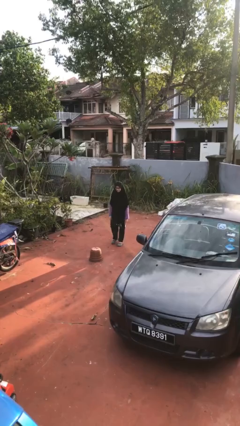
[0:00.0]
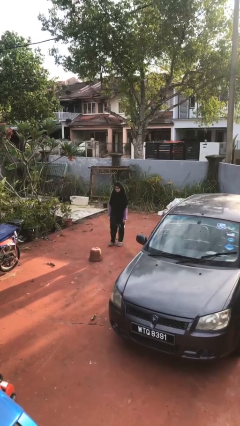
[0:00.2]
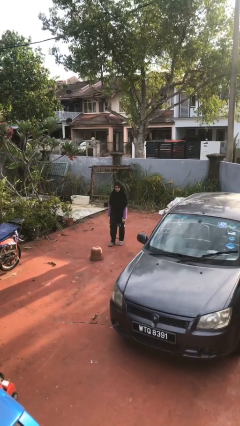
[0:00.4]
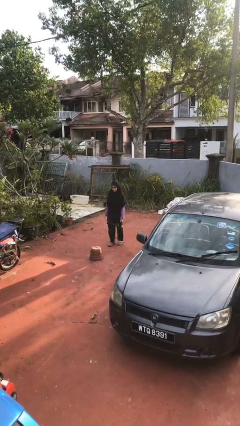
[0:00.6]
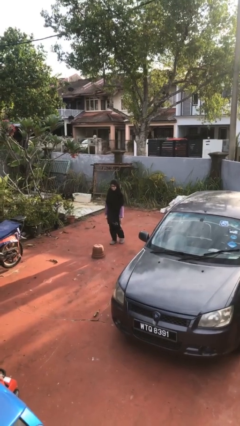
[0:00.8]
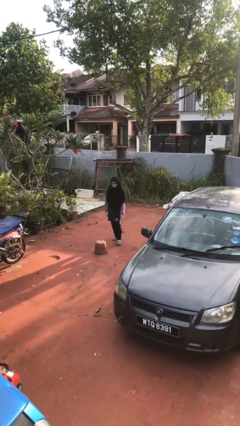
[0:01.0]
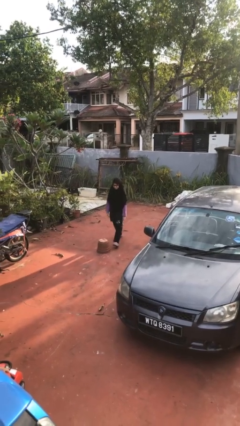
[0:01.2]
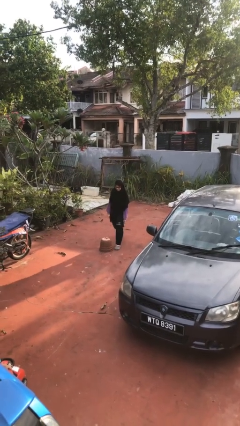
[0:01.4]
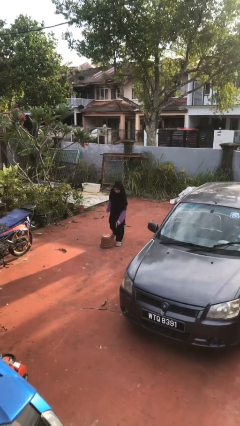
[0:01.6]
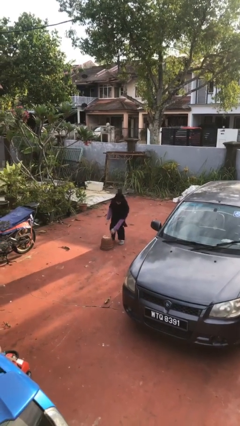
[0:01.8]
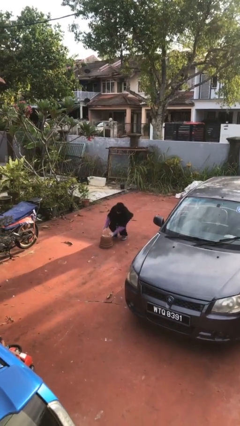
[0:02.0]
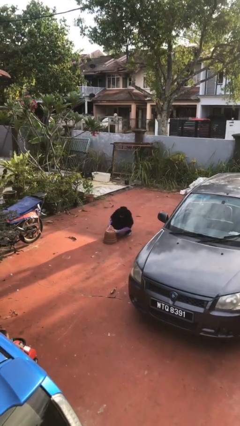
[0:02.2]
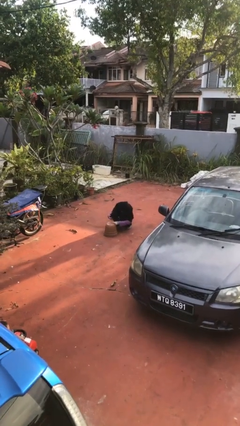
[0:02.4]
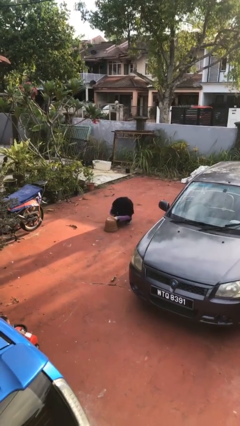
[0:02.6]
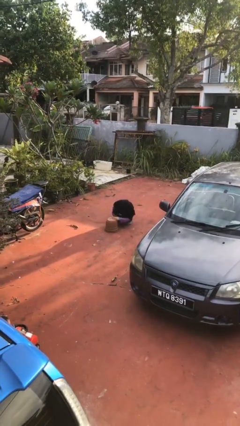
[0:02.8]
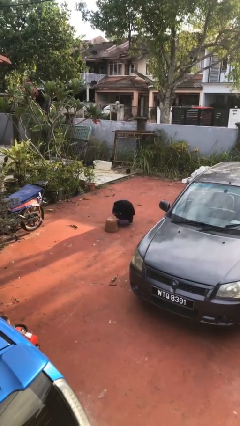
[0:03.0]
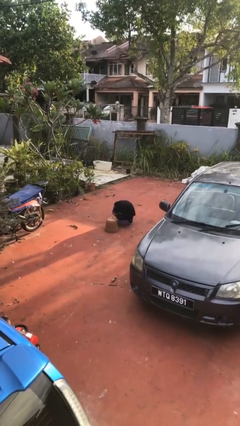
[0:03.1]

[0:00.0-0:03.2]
person trips on object on floor

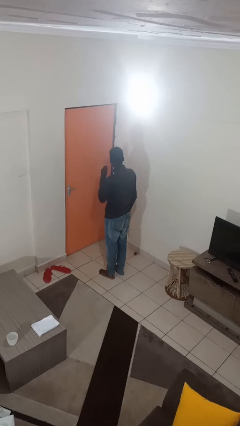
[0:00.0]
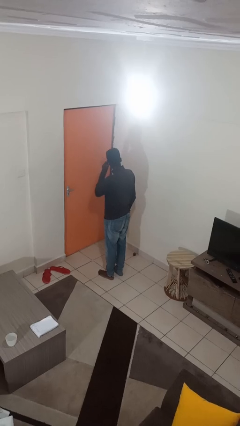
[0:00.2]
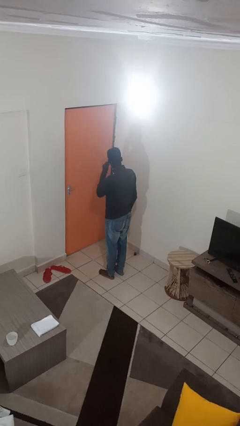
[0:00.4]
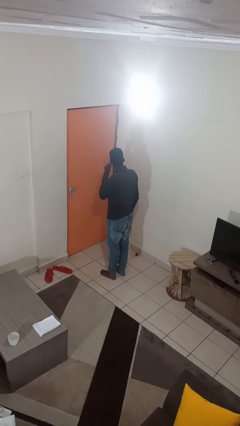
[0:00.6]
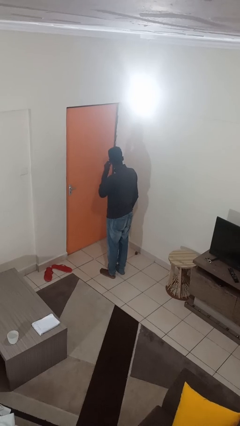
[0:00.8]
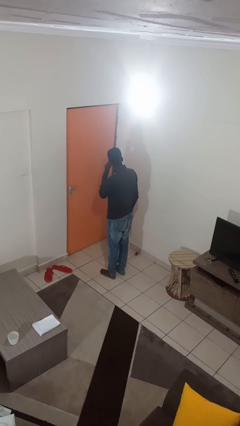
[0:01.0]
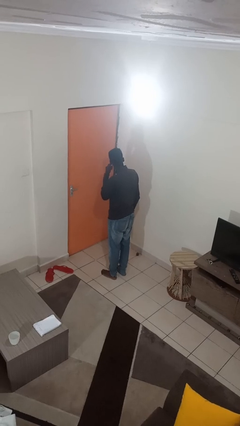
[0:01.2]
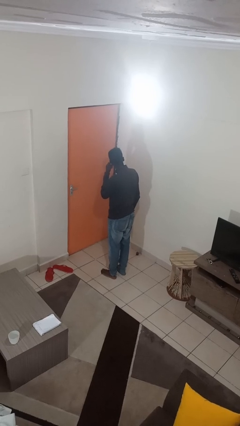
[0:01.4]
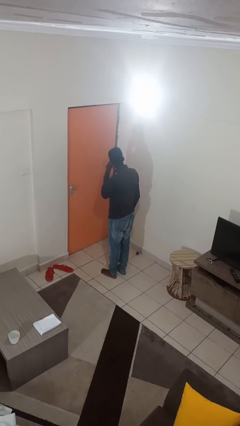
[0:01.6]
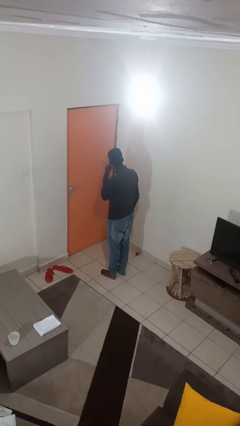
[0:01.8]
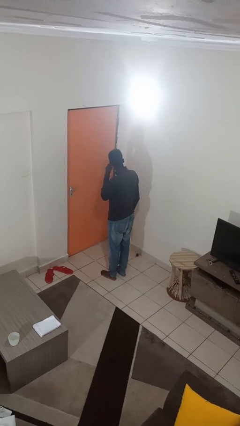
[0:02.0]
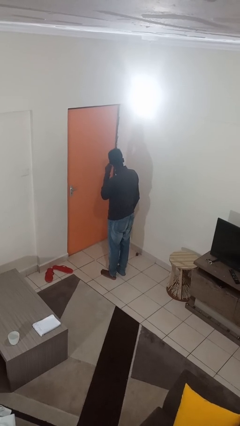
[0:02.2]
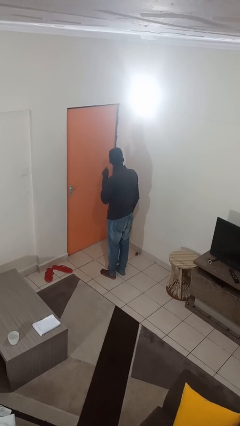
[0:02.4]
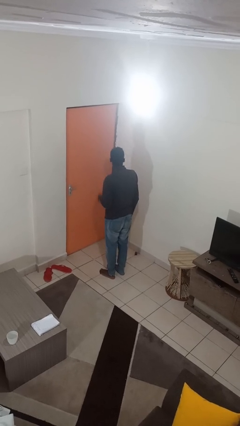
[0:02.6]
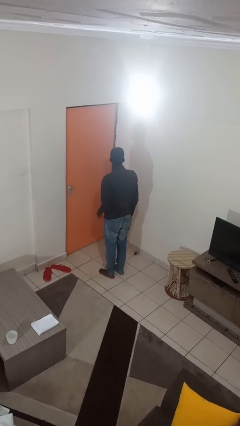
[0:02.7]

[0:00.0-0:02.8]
person touches earlobe

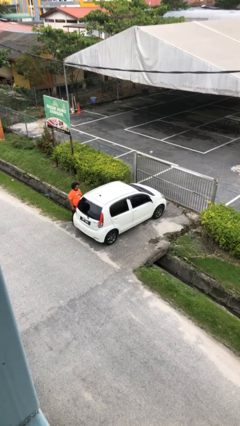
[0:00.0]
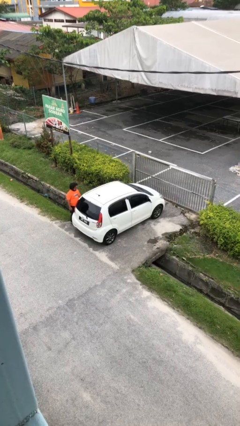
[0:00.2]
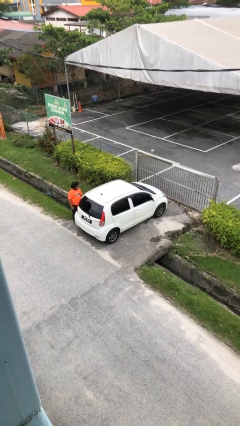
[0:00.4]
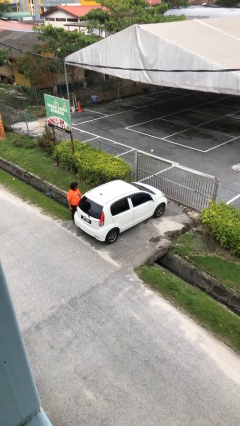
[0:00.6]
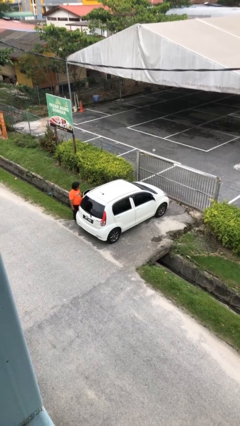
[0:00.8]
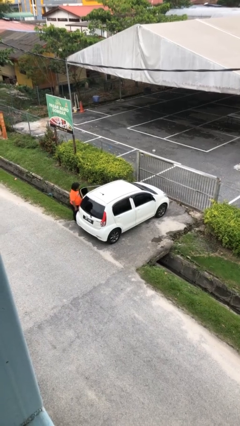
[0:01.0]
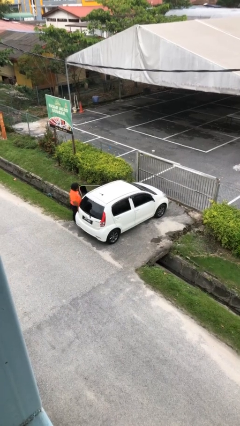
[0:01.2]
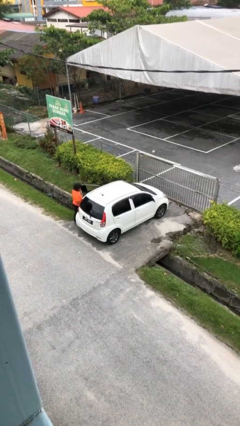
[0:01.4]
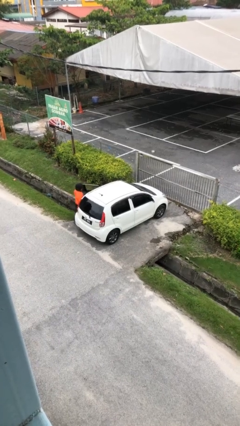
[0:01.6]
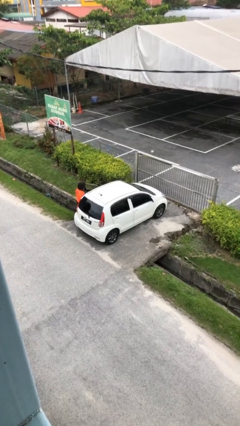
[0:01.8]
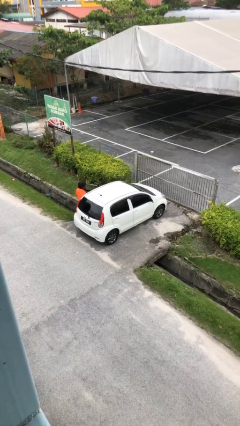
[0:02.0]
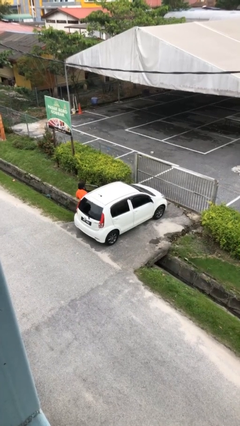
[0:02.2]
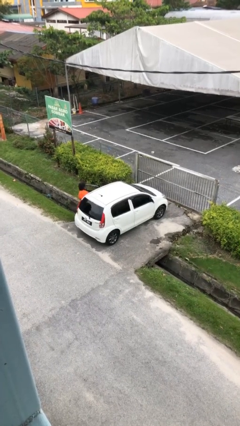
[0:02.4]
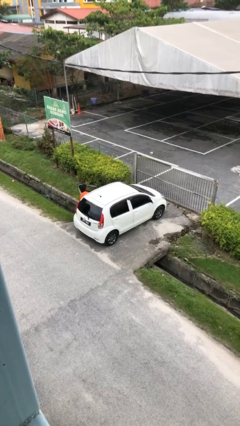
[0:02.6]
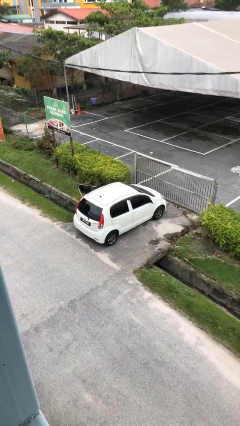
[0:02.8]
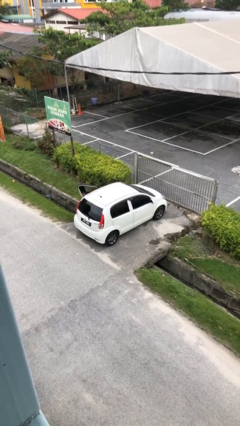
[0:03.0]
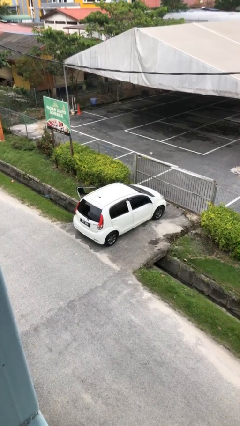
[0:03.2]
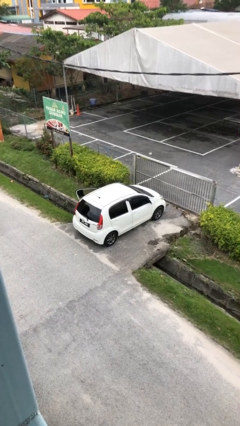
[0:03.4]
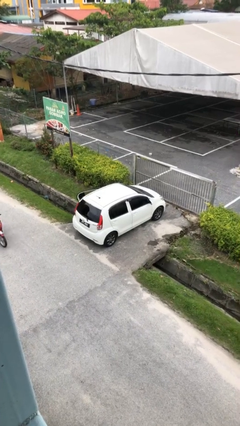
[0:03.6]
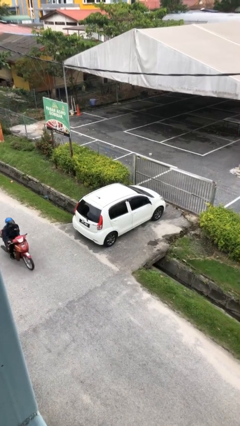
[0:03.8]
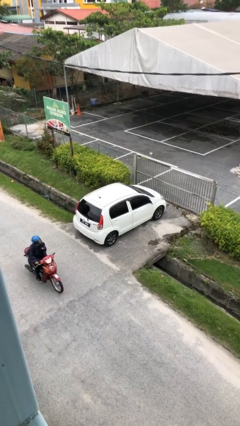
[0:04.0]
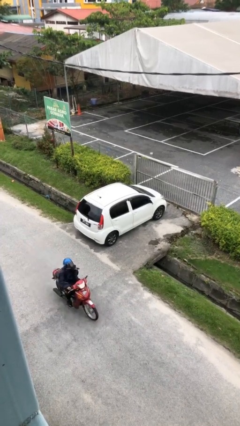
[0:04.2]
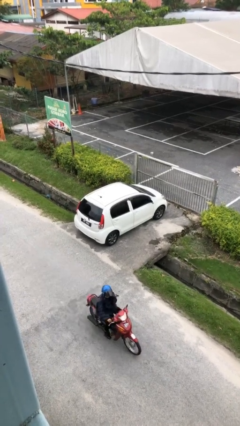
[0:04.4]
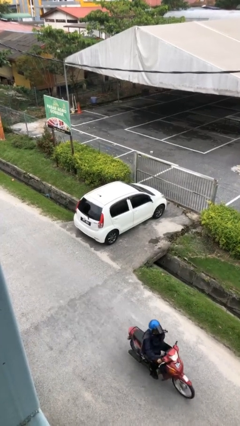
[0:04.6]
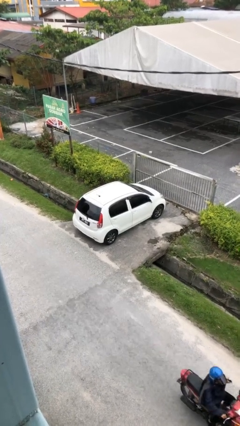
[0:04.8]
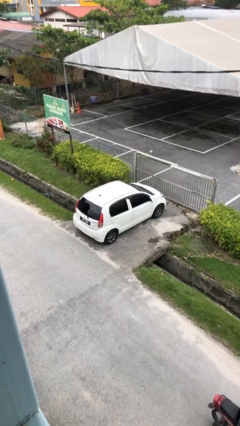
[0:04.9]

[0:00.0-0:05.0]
car picks up person

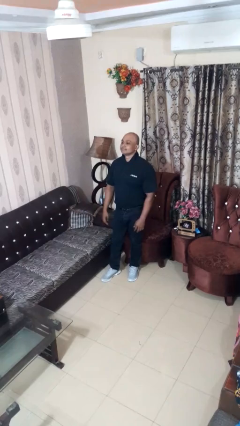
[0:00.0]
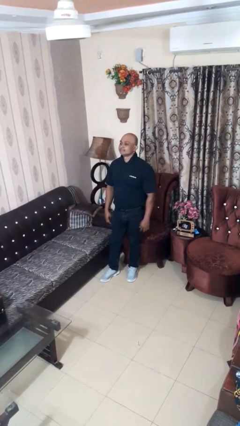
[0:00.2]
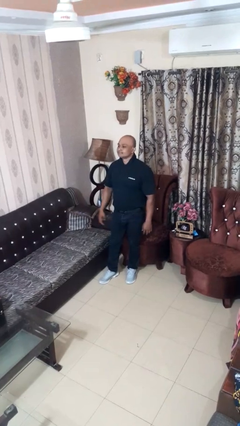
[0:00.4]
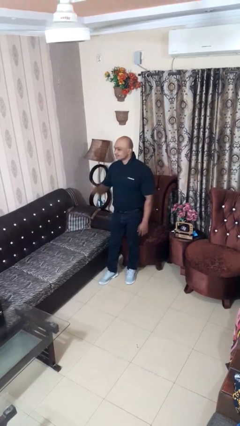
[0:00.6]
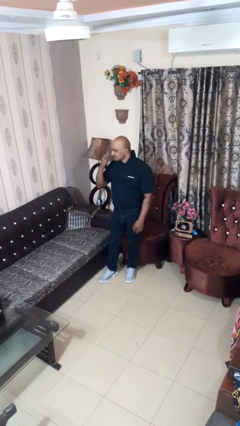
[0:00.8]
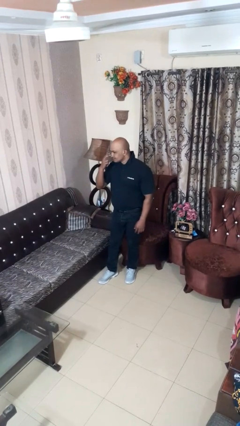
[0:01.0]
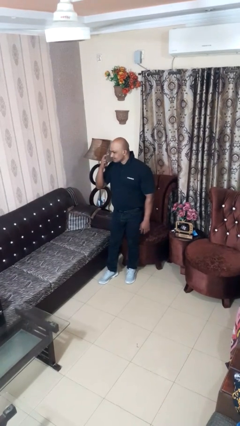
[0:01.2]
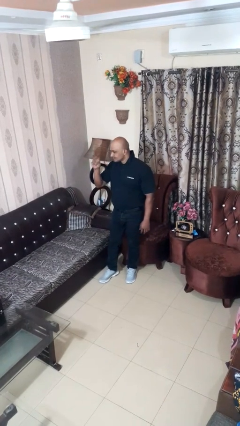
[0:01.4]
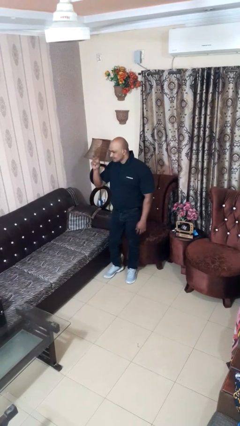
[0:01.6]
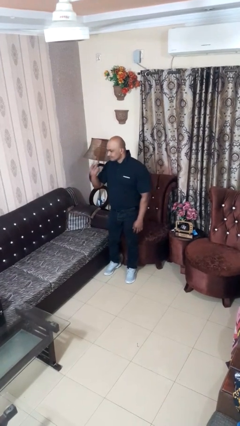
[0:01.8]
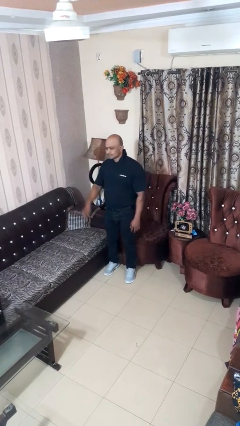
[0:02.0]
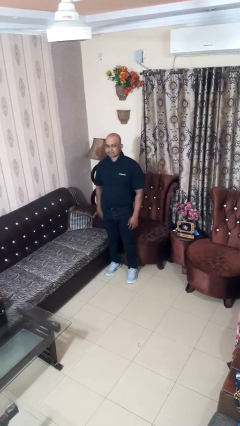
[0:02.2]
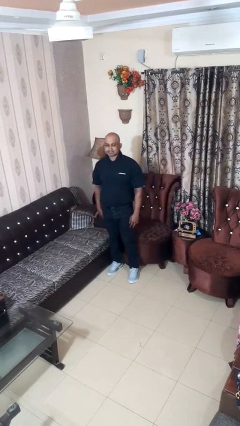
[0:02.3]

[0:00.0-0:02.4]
person gestures watch closely

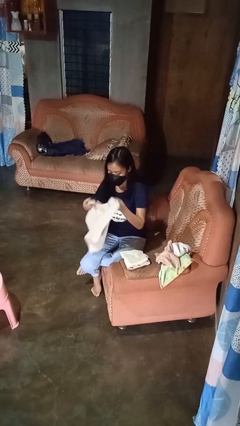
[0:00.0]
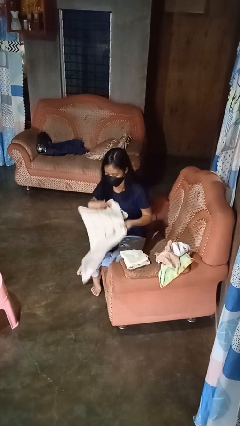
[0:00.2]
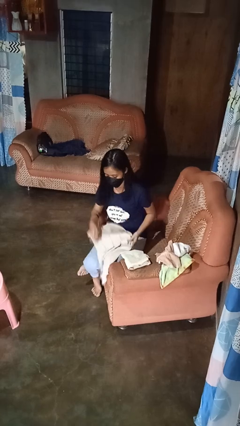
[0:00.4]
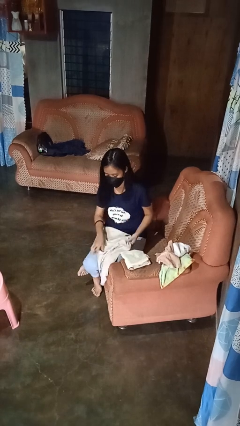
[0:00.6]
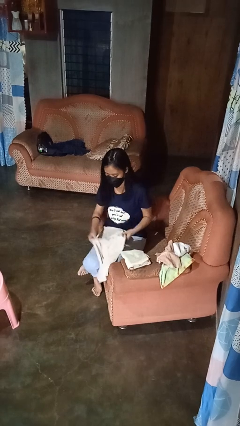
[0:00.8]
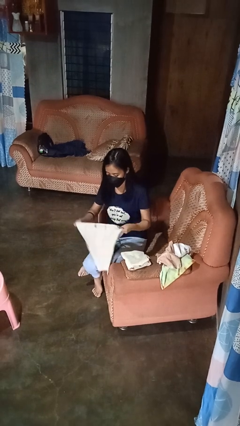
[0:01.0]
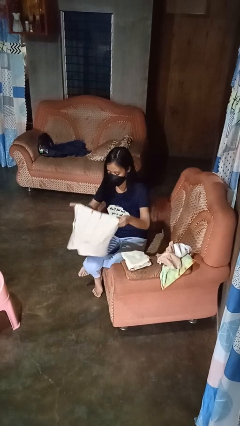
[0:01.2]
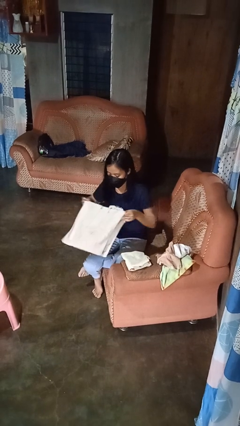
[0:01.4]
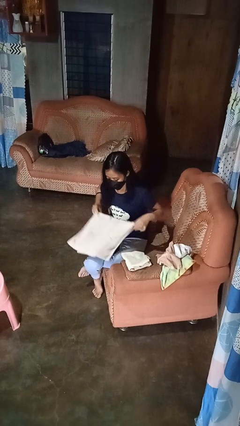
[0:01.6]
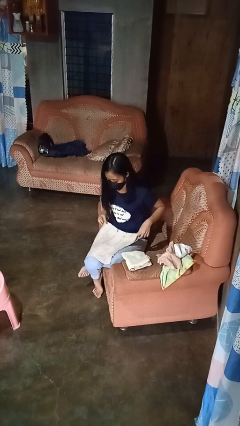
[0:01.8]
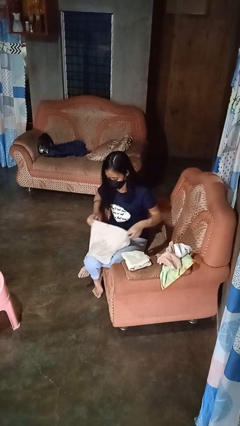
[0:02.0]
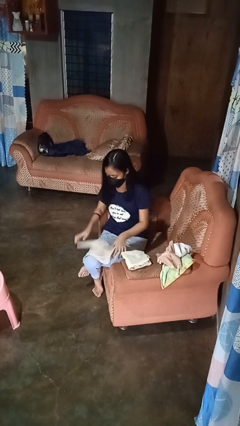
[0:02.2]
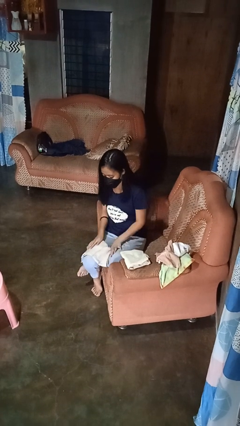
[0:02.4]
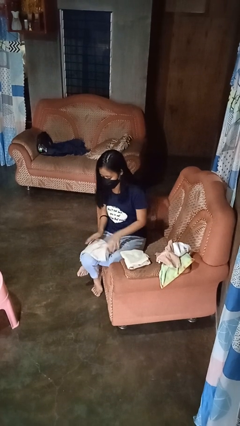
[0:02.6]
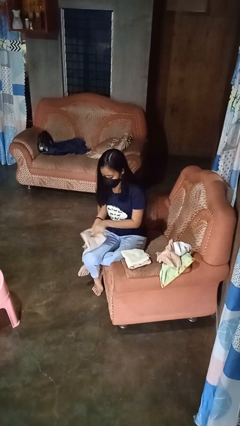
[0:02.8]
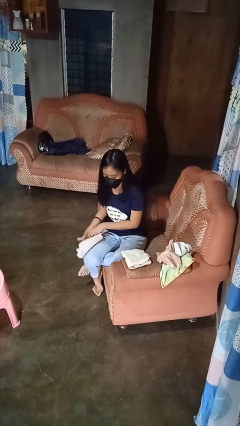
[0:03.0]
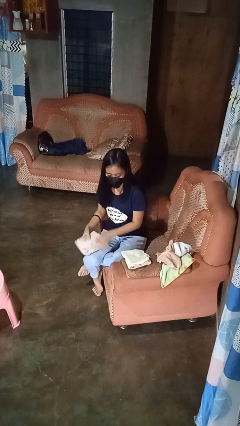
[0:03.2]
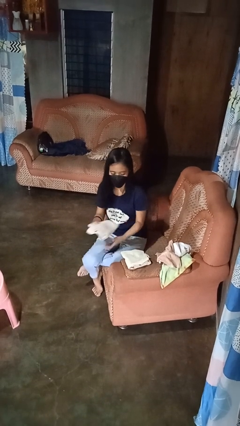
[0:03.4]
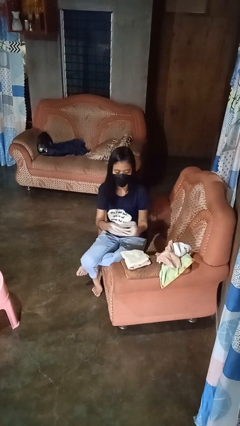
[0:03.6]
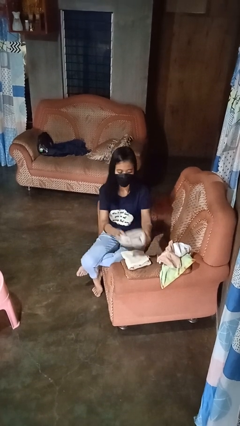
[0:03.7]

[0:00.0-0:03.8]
person folds towel

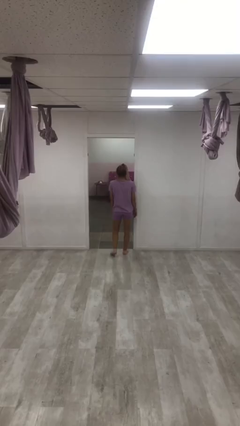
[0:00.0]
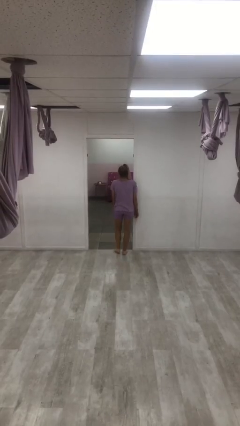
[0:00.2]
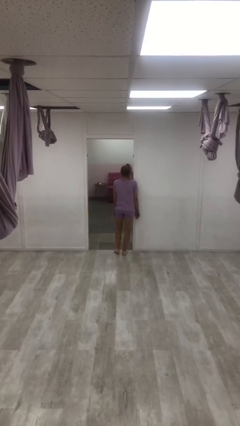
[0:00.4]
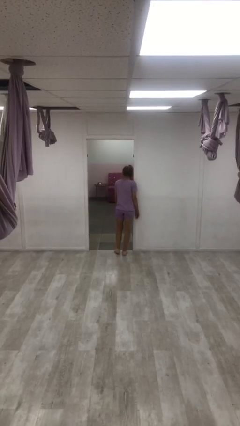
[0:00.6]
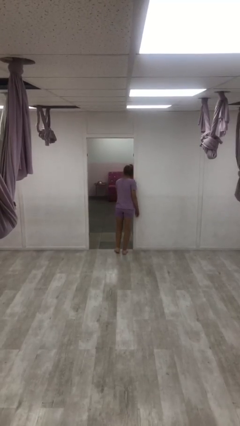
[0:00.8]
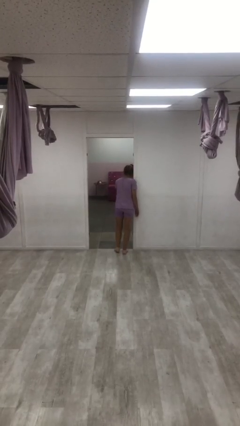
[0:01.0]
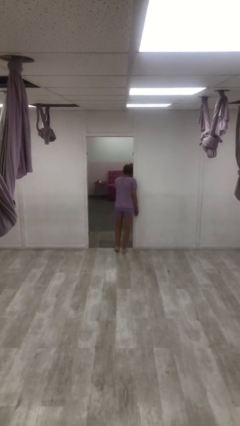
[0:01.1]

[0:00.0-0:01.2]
person bumps into wall
